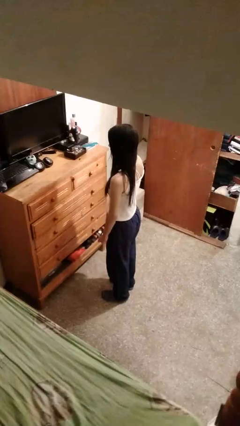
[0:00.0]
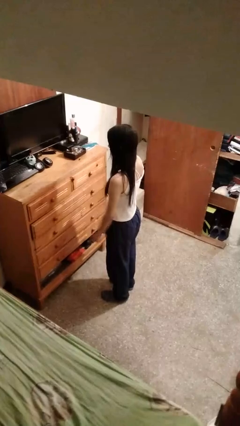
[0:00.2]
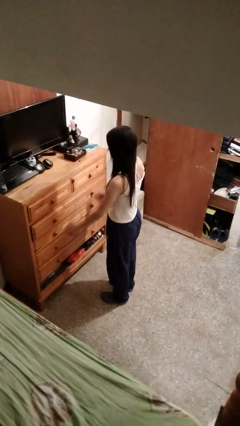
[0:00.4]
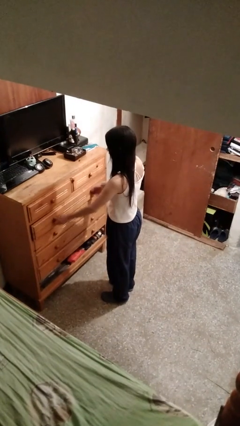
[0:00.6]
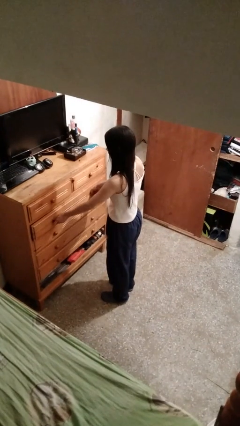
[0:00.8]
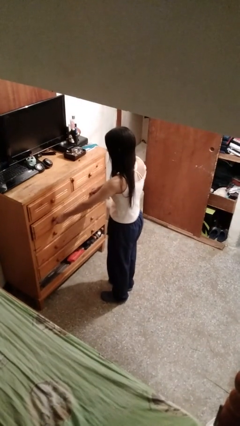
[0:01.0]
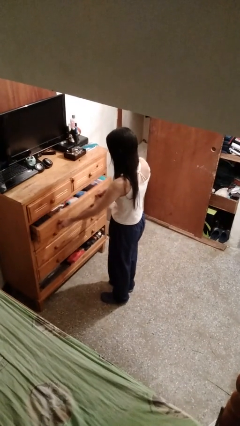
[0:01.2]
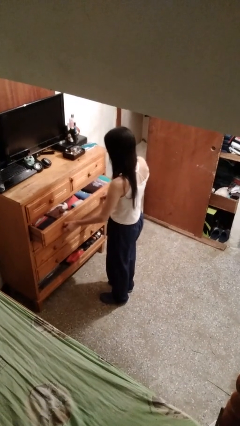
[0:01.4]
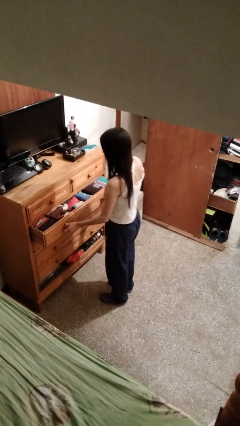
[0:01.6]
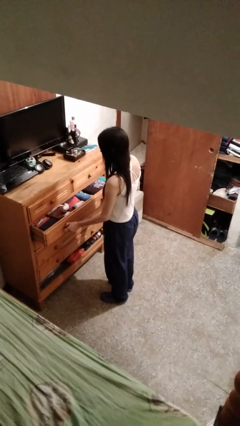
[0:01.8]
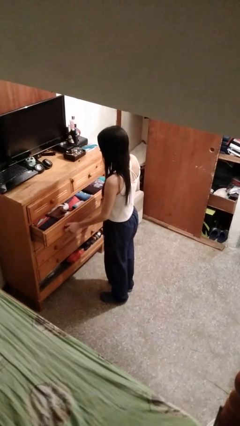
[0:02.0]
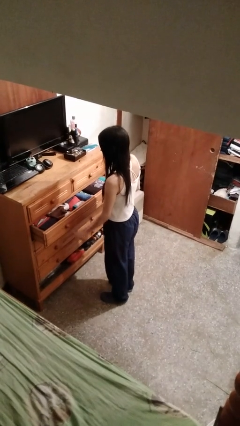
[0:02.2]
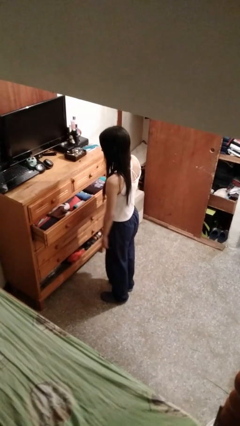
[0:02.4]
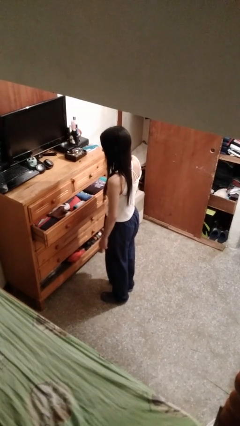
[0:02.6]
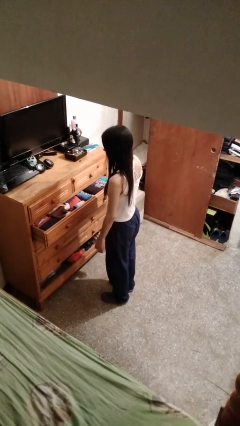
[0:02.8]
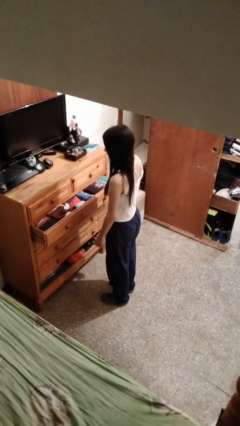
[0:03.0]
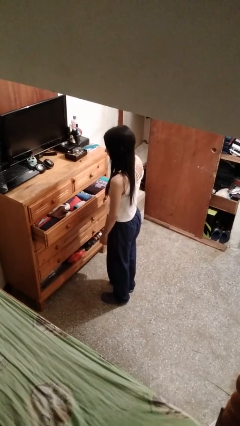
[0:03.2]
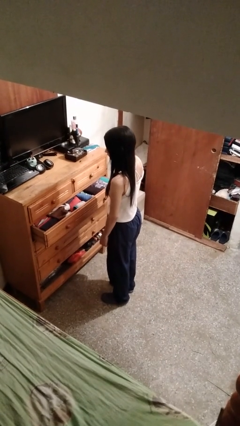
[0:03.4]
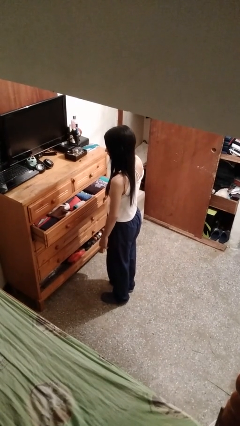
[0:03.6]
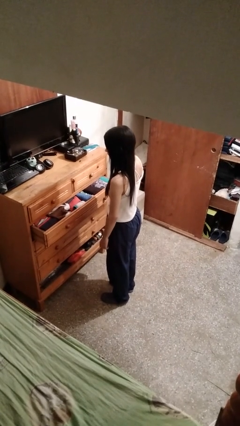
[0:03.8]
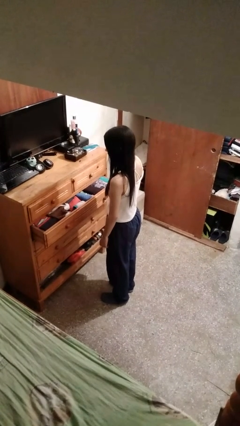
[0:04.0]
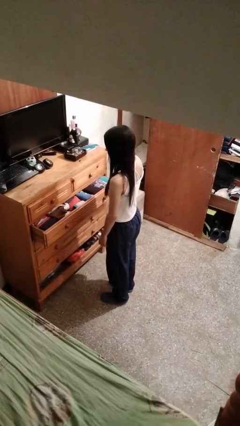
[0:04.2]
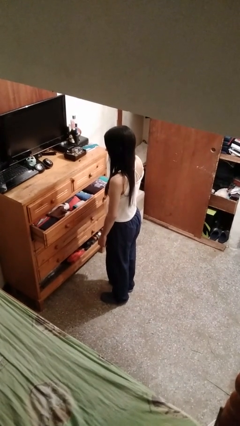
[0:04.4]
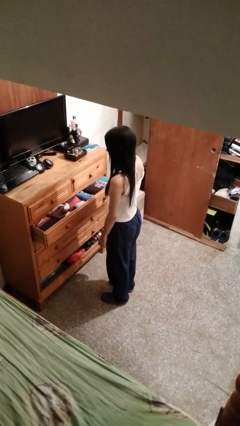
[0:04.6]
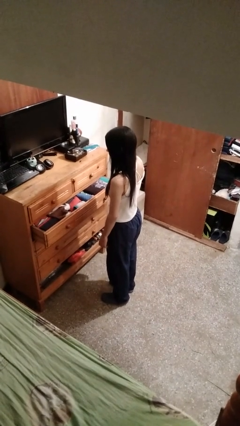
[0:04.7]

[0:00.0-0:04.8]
person opens dresser drawer

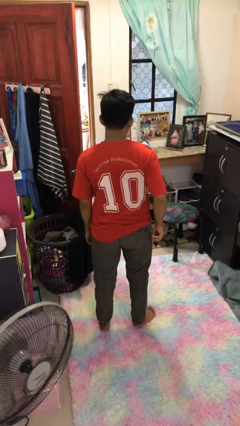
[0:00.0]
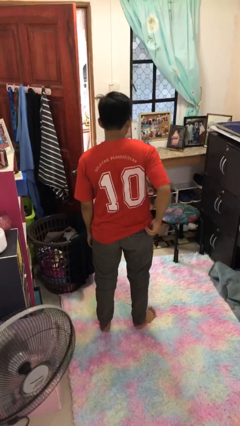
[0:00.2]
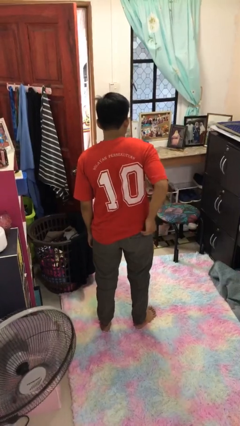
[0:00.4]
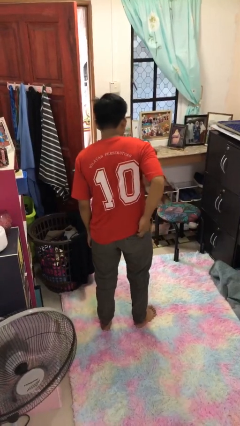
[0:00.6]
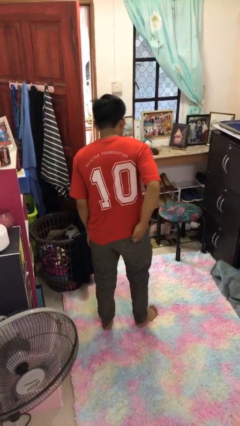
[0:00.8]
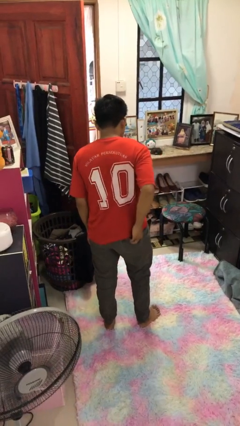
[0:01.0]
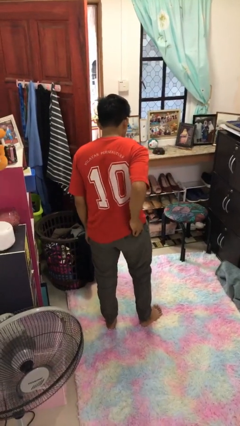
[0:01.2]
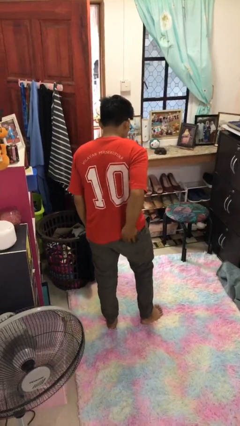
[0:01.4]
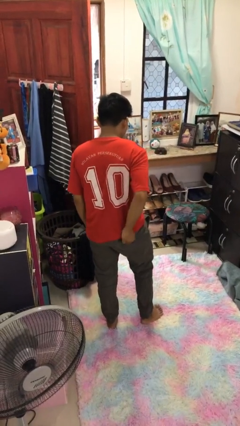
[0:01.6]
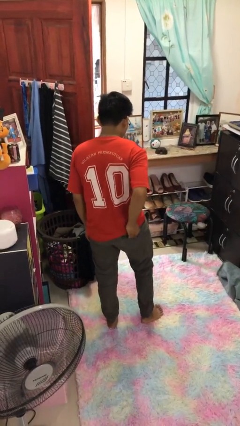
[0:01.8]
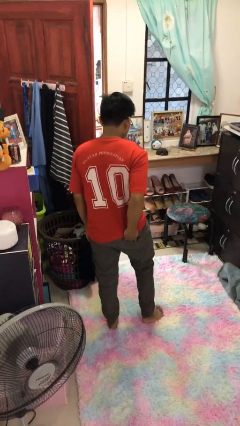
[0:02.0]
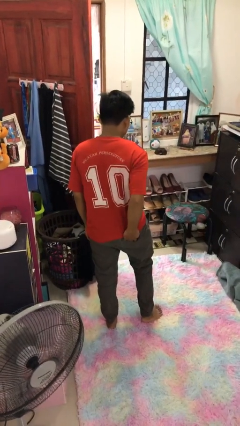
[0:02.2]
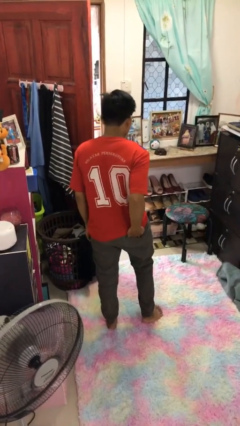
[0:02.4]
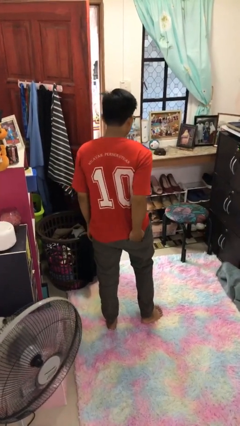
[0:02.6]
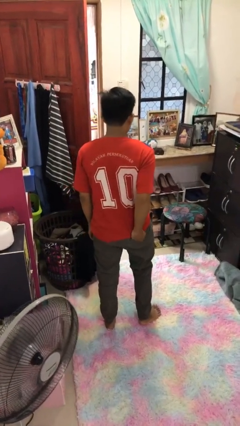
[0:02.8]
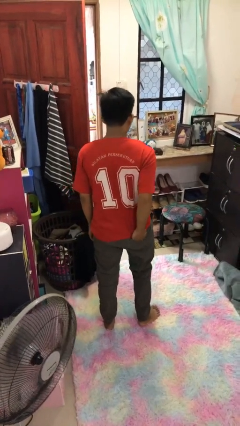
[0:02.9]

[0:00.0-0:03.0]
person puts hands in back pockets

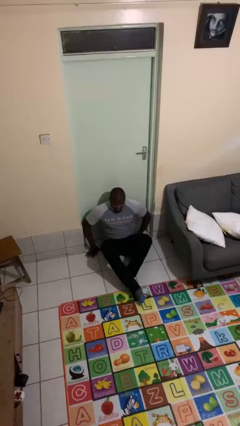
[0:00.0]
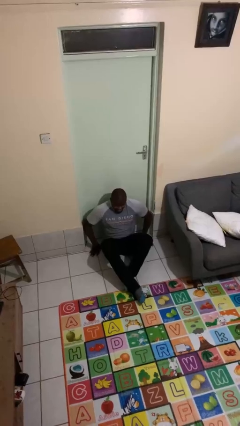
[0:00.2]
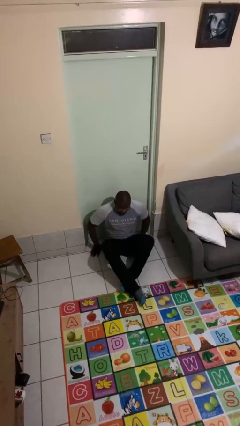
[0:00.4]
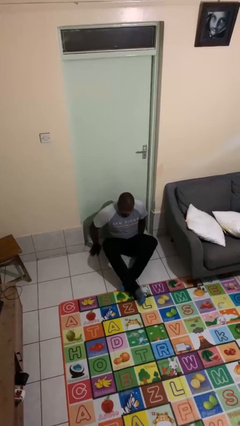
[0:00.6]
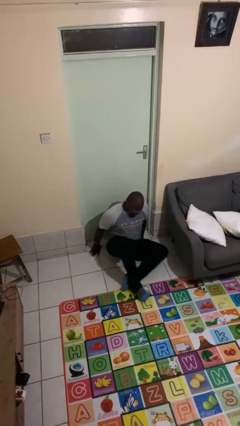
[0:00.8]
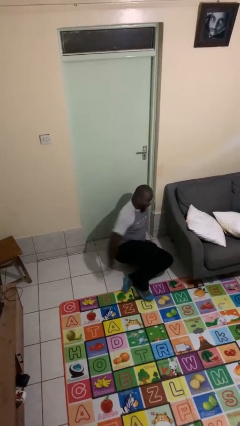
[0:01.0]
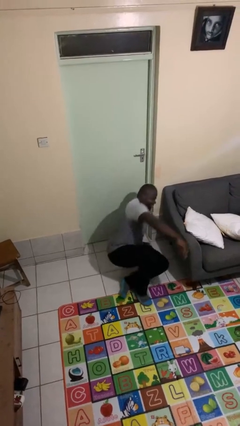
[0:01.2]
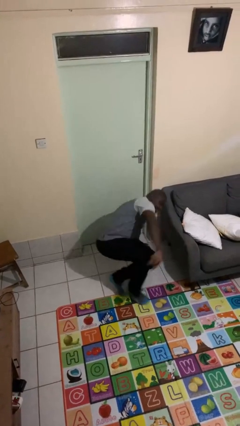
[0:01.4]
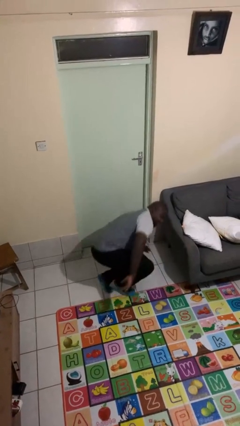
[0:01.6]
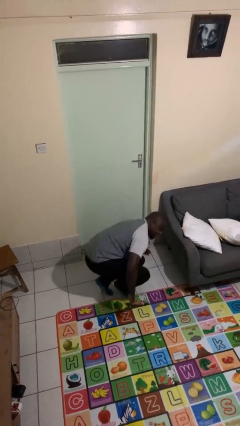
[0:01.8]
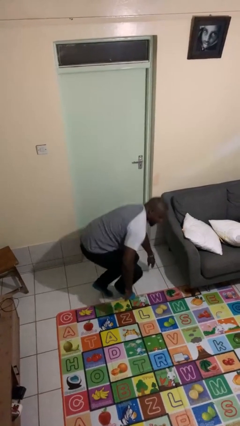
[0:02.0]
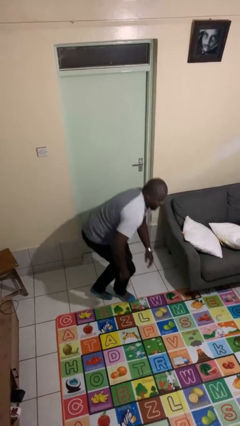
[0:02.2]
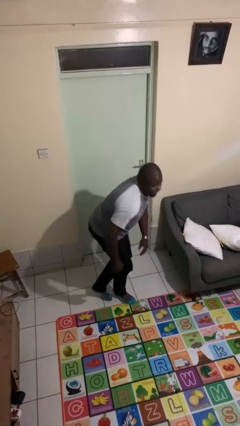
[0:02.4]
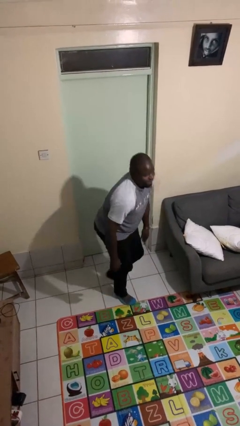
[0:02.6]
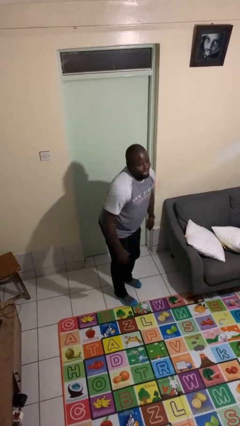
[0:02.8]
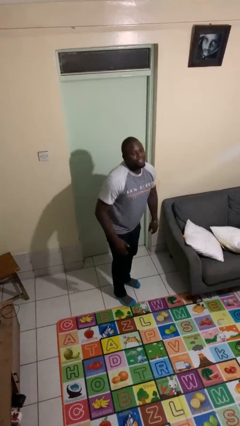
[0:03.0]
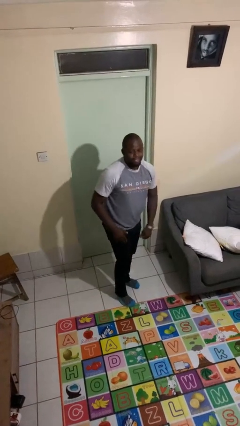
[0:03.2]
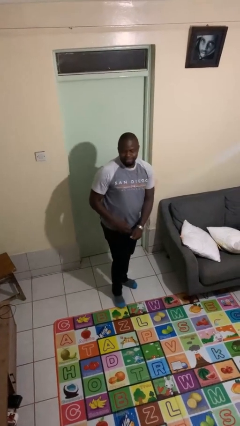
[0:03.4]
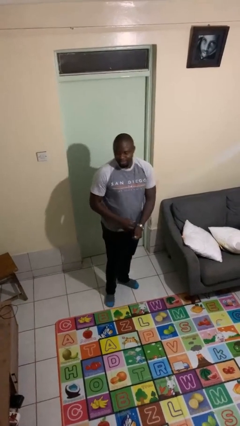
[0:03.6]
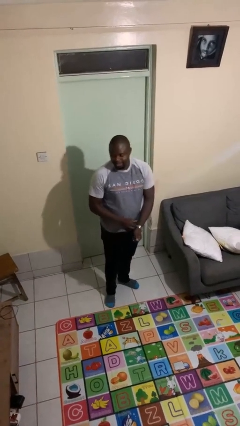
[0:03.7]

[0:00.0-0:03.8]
person stands up from floor

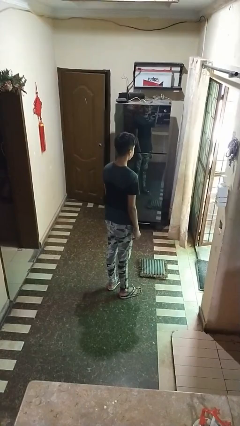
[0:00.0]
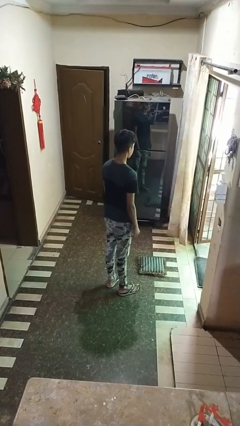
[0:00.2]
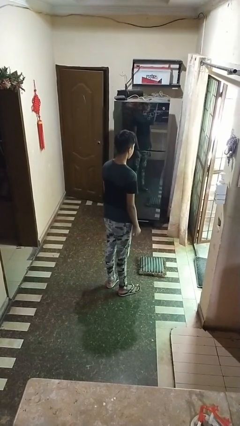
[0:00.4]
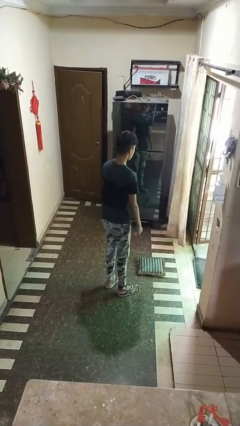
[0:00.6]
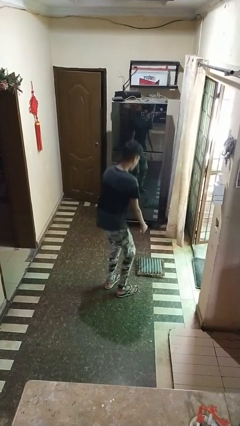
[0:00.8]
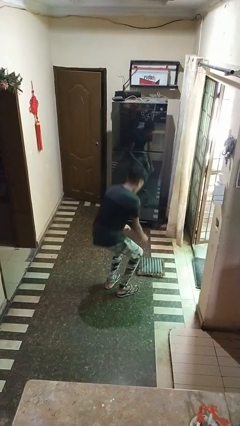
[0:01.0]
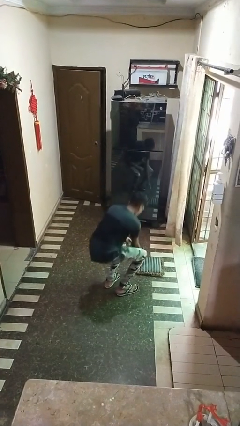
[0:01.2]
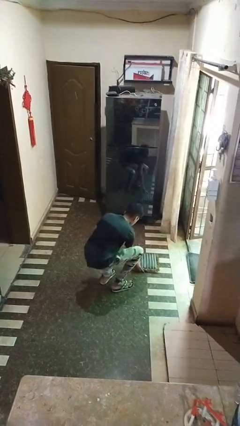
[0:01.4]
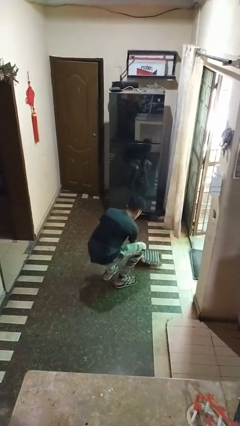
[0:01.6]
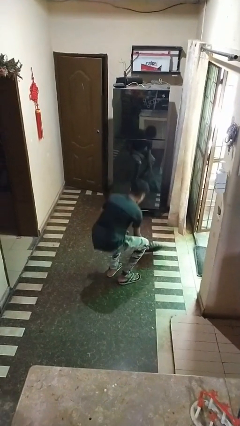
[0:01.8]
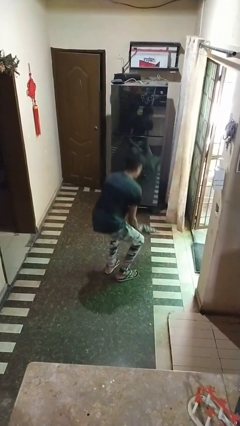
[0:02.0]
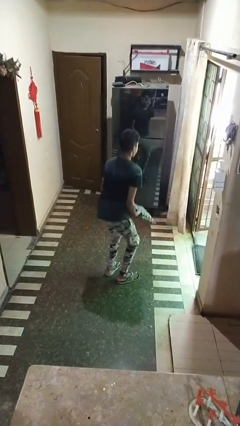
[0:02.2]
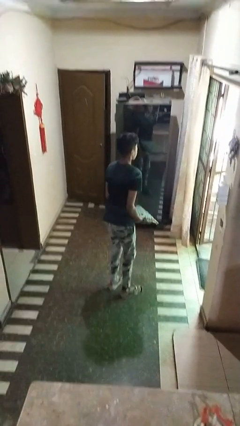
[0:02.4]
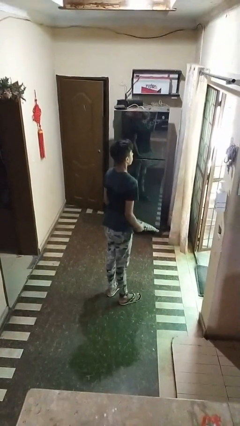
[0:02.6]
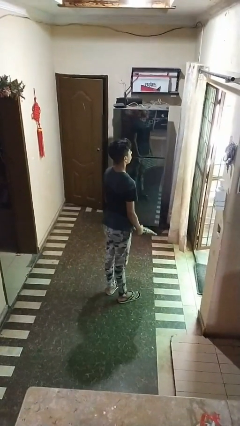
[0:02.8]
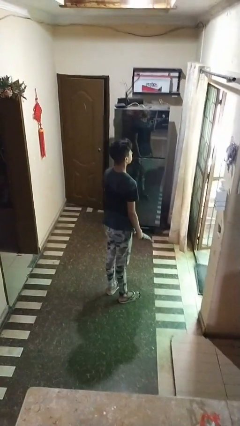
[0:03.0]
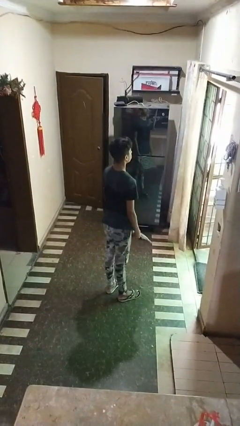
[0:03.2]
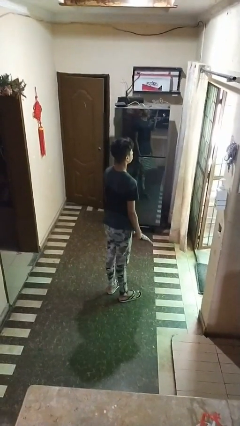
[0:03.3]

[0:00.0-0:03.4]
person picks up object from floor

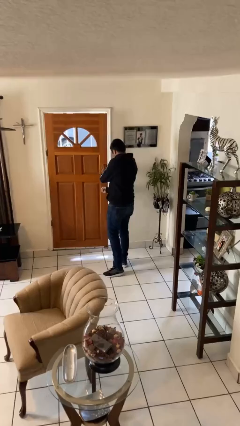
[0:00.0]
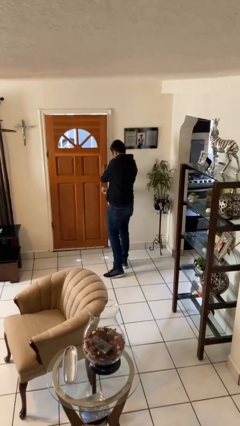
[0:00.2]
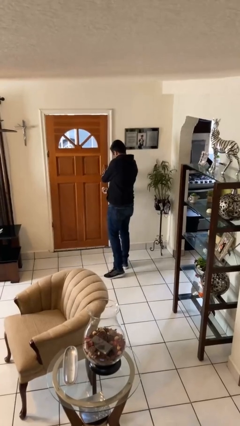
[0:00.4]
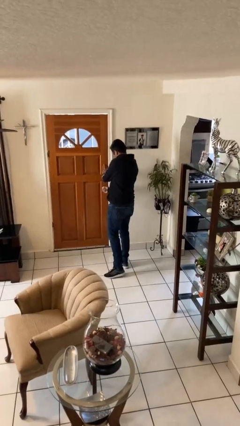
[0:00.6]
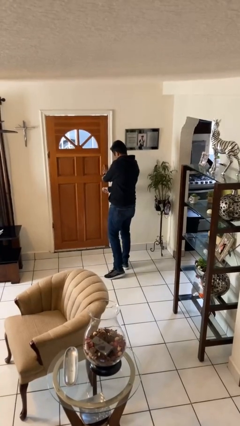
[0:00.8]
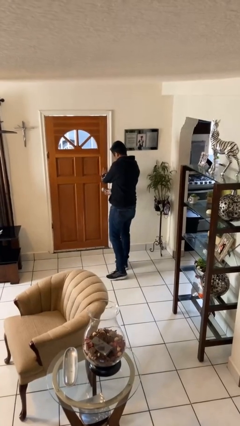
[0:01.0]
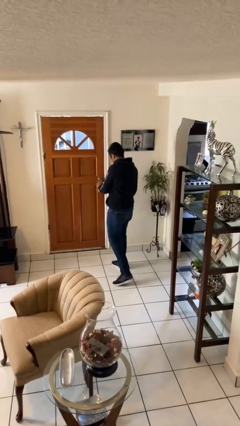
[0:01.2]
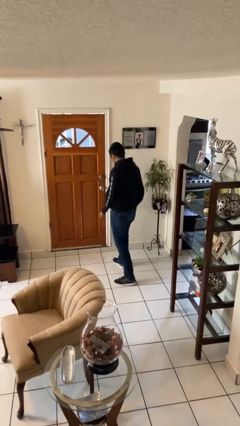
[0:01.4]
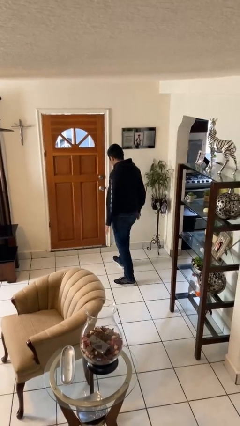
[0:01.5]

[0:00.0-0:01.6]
person closes facility door

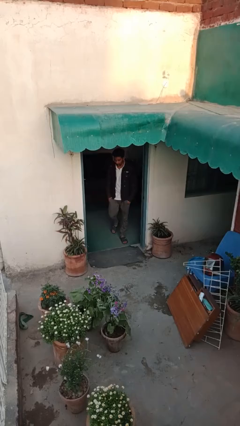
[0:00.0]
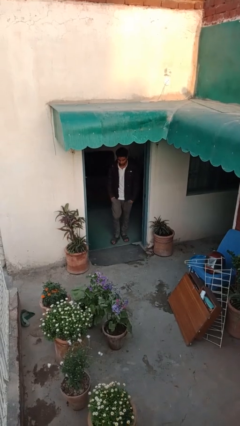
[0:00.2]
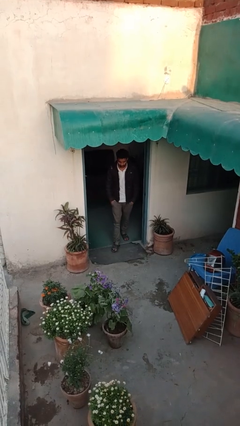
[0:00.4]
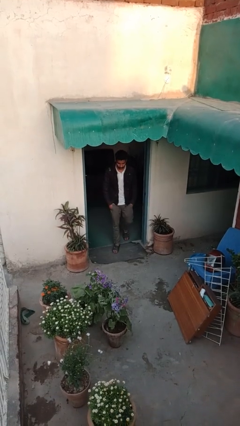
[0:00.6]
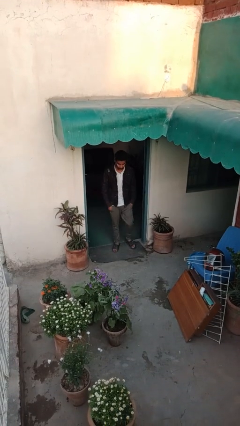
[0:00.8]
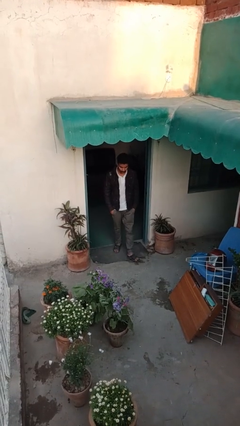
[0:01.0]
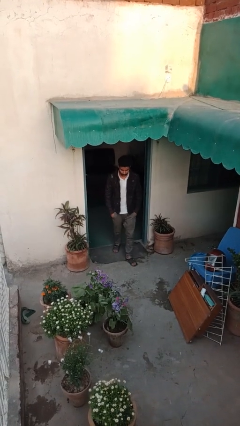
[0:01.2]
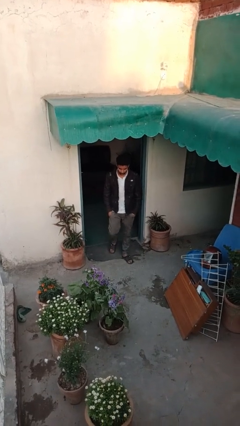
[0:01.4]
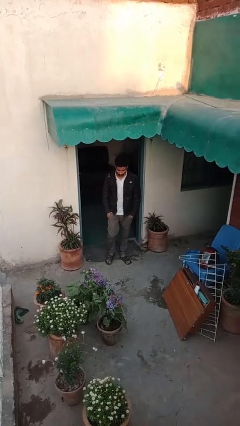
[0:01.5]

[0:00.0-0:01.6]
person enters scene through structure
